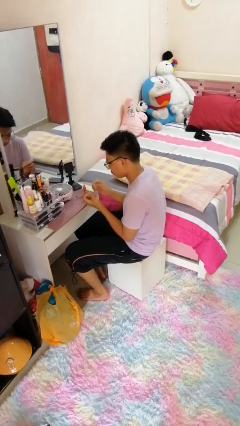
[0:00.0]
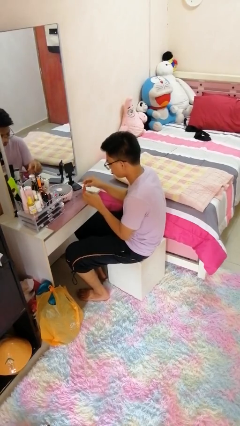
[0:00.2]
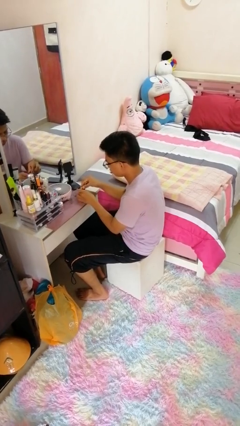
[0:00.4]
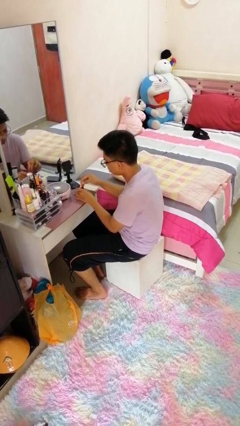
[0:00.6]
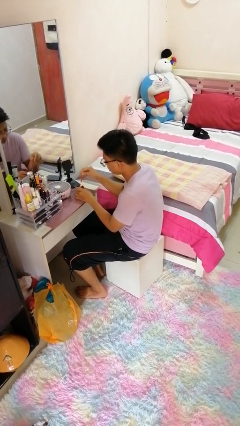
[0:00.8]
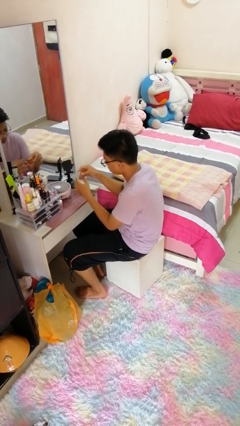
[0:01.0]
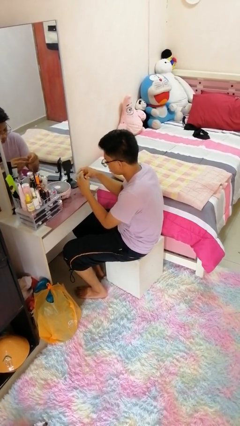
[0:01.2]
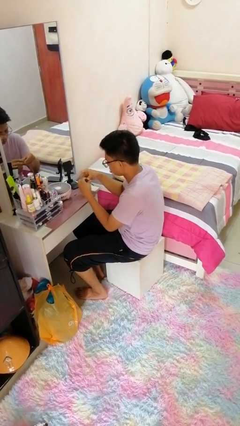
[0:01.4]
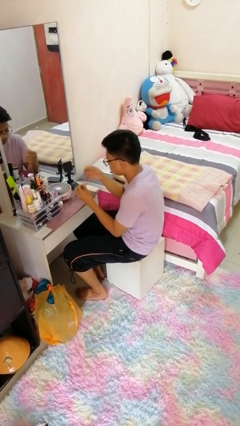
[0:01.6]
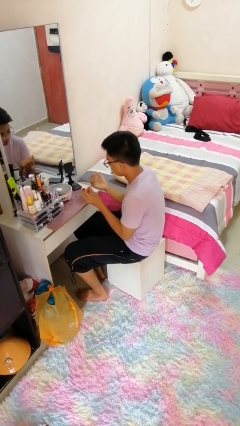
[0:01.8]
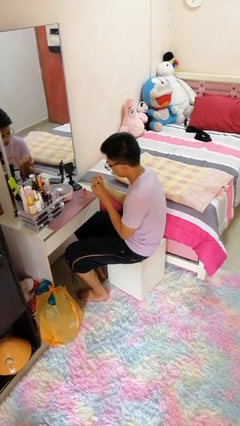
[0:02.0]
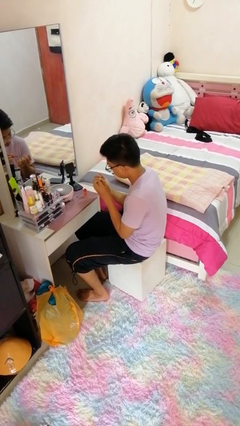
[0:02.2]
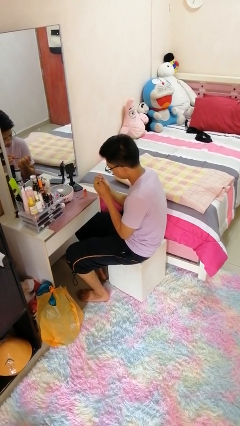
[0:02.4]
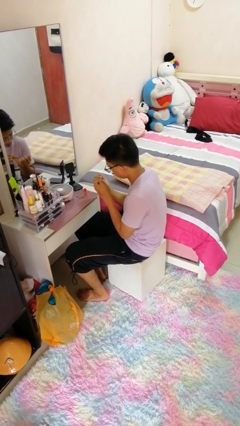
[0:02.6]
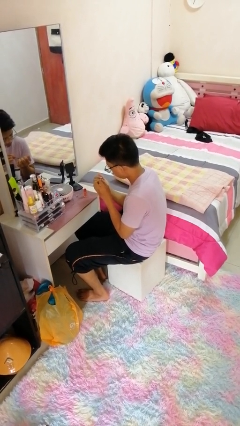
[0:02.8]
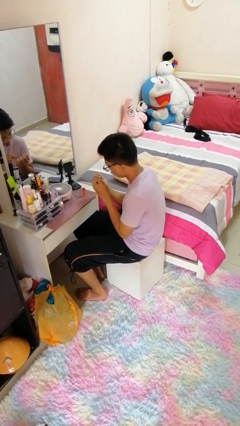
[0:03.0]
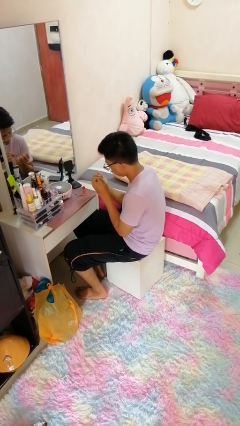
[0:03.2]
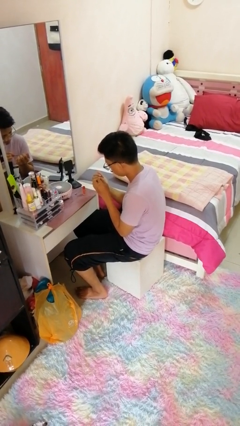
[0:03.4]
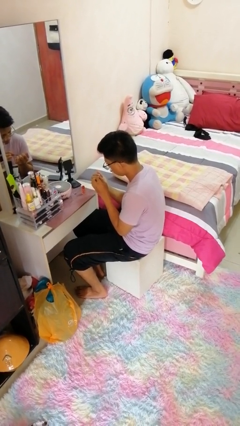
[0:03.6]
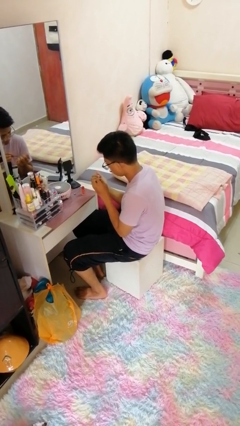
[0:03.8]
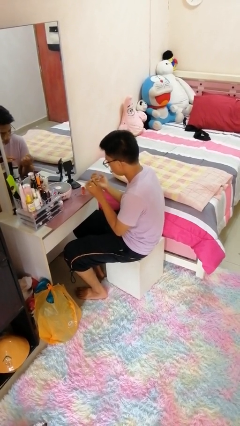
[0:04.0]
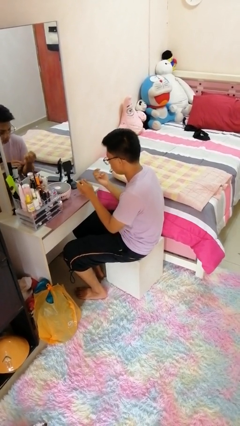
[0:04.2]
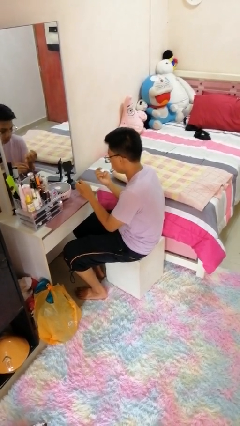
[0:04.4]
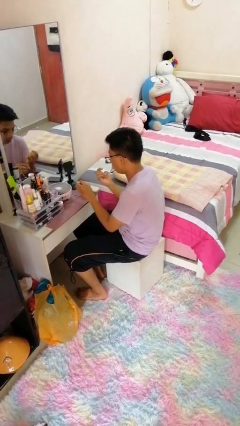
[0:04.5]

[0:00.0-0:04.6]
person paints fingernails

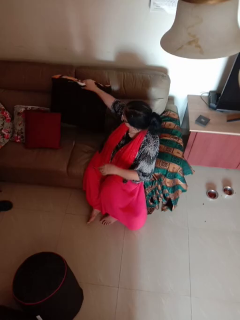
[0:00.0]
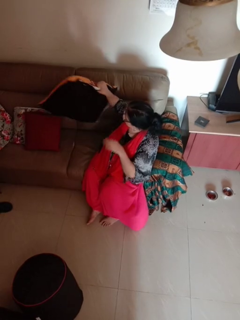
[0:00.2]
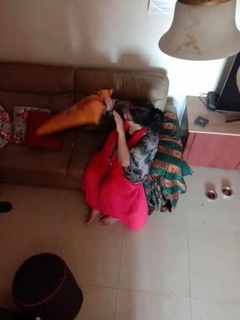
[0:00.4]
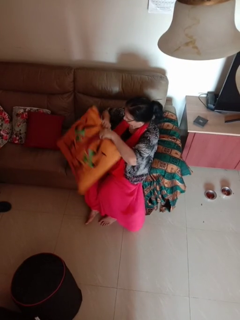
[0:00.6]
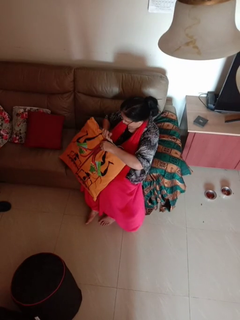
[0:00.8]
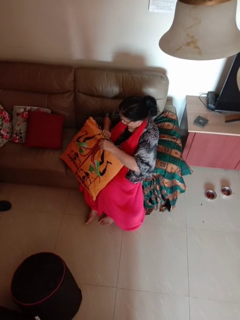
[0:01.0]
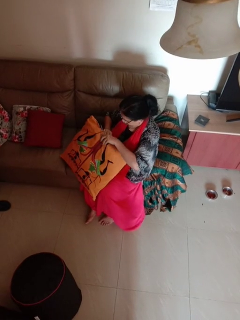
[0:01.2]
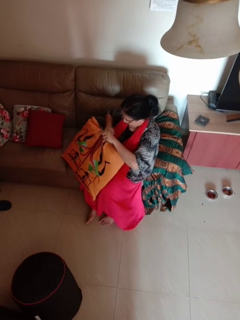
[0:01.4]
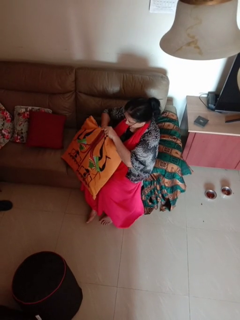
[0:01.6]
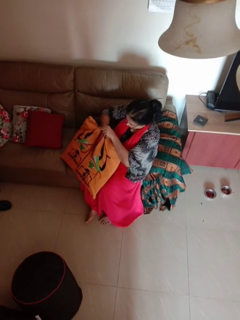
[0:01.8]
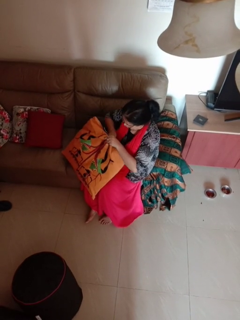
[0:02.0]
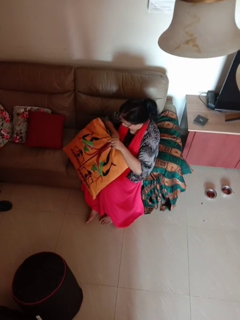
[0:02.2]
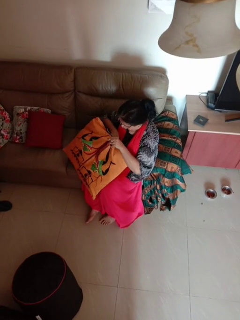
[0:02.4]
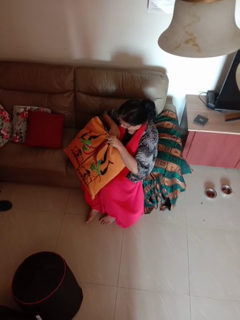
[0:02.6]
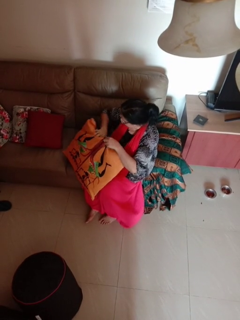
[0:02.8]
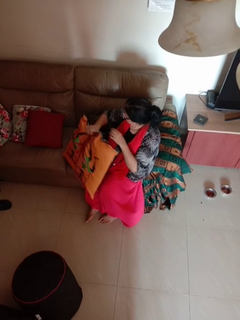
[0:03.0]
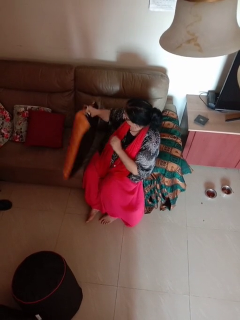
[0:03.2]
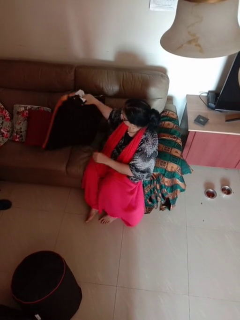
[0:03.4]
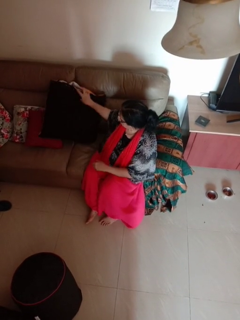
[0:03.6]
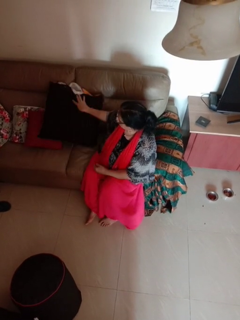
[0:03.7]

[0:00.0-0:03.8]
person searches in couch

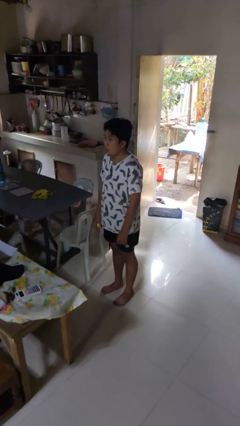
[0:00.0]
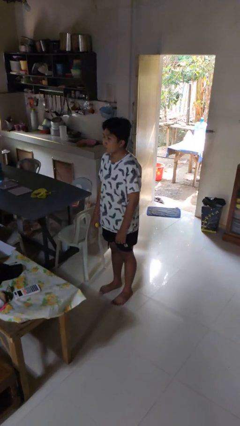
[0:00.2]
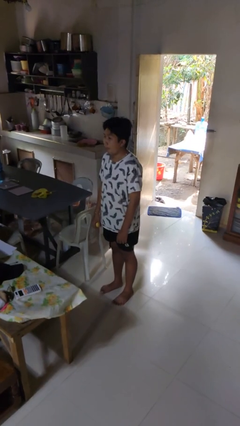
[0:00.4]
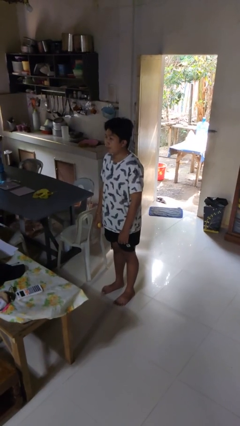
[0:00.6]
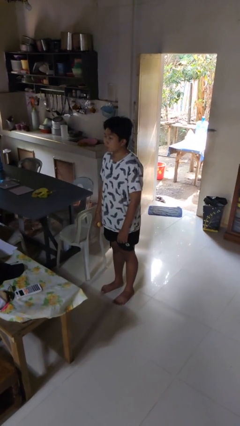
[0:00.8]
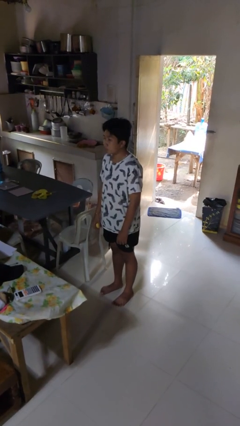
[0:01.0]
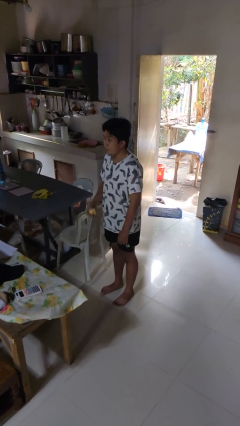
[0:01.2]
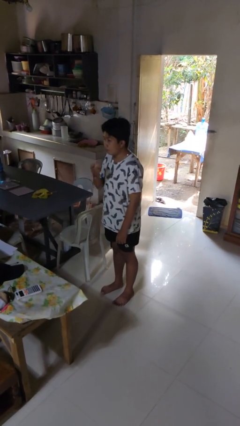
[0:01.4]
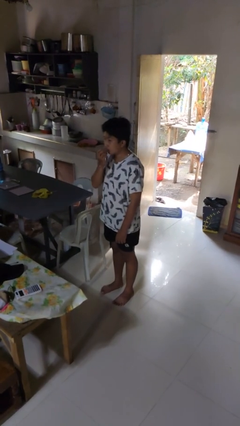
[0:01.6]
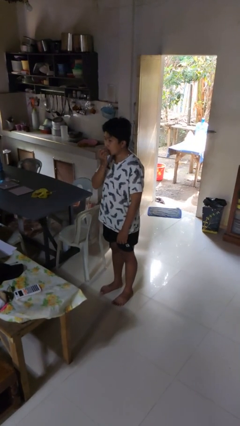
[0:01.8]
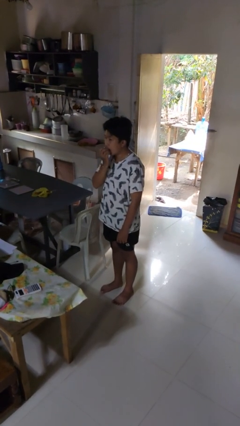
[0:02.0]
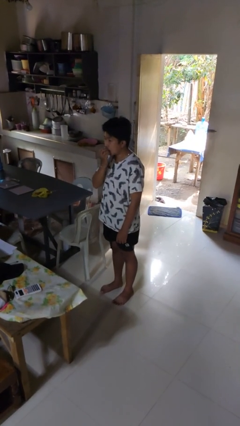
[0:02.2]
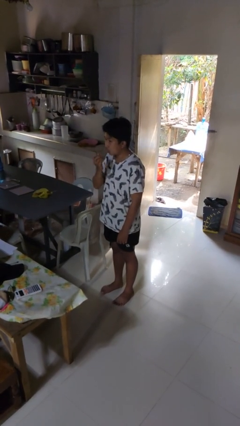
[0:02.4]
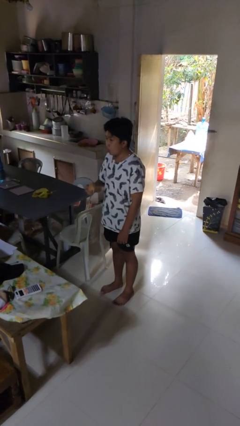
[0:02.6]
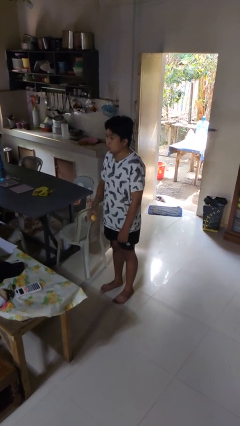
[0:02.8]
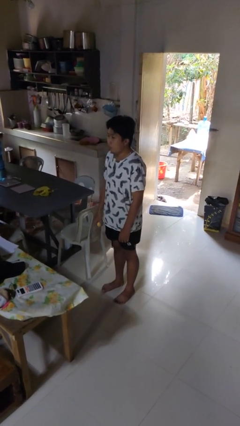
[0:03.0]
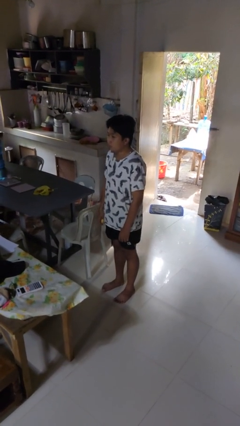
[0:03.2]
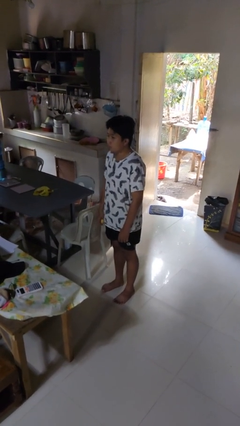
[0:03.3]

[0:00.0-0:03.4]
person eats apple

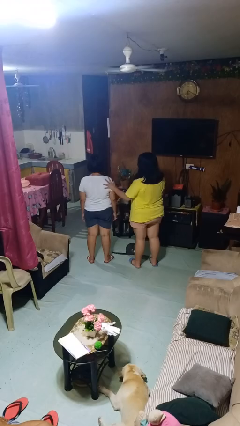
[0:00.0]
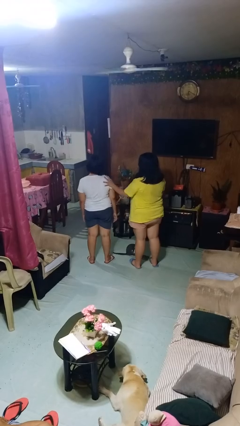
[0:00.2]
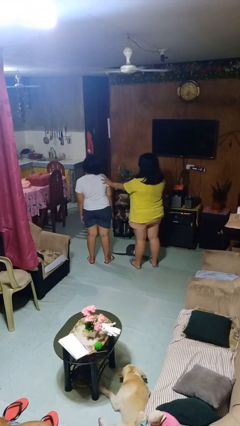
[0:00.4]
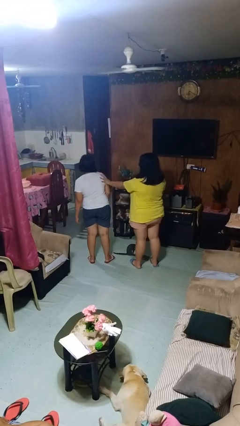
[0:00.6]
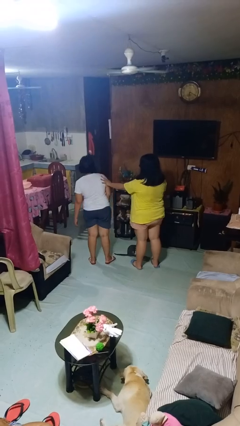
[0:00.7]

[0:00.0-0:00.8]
person shoves person

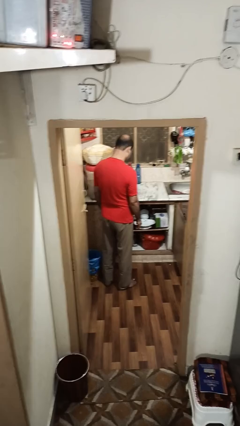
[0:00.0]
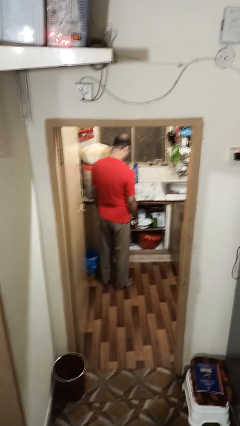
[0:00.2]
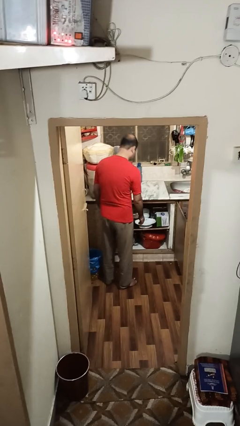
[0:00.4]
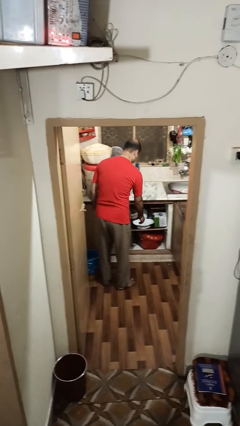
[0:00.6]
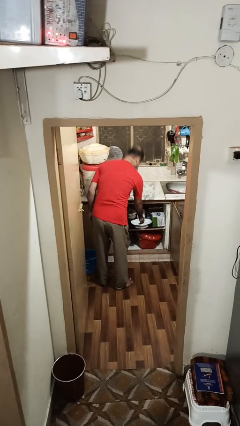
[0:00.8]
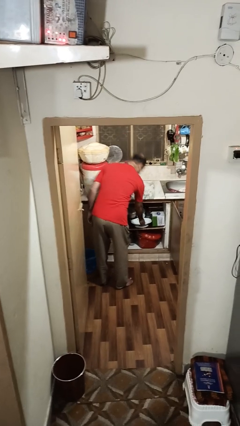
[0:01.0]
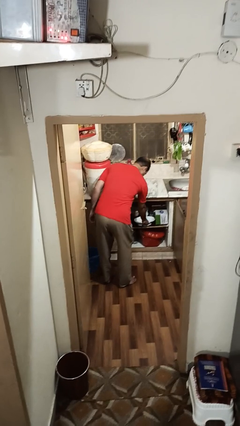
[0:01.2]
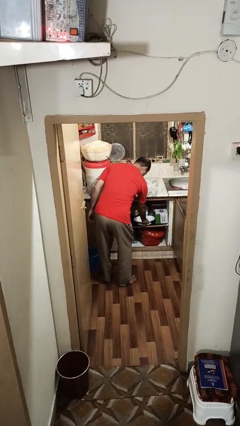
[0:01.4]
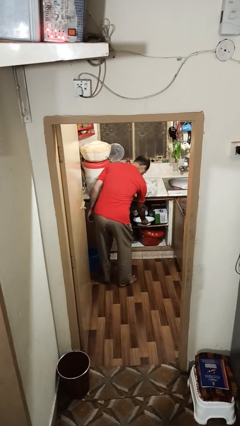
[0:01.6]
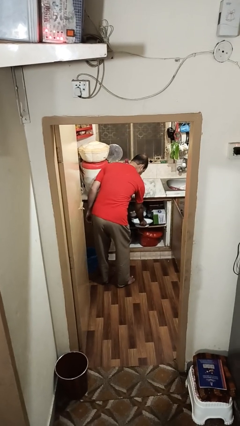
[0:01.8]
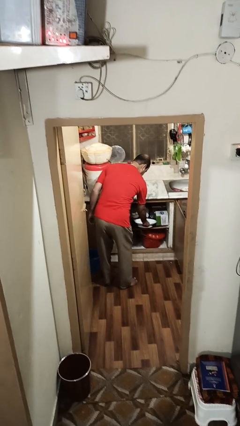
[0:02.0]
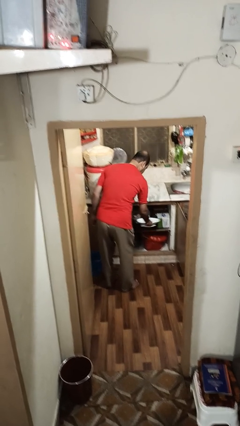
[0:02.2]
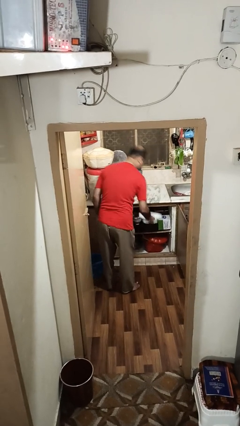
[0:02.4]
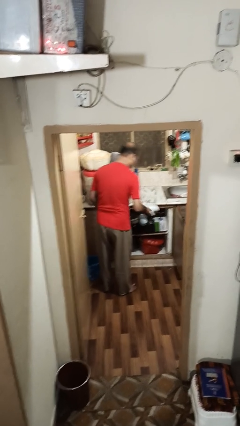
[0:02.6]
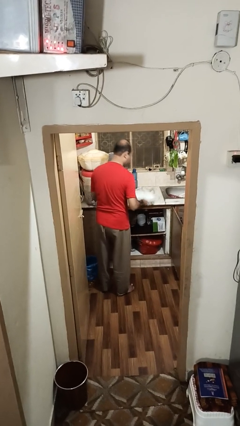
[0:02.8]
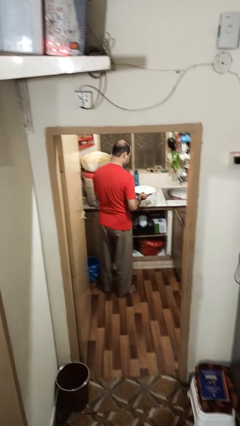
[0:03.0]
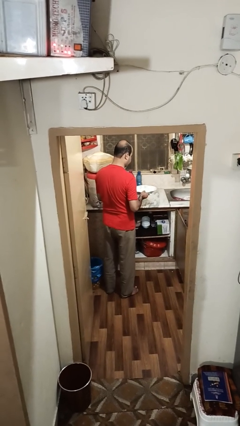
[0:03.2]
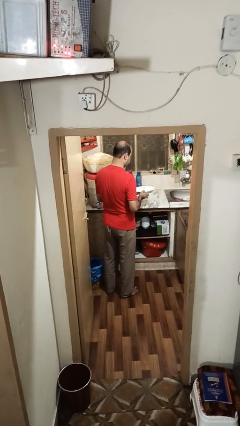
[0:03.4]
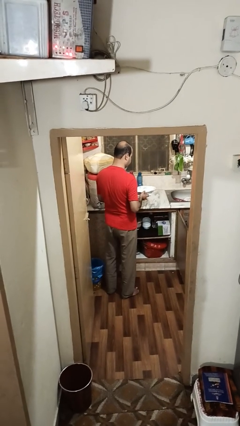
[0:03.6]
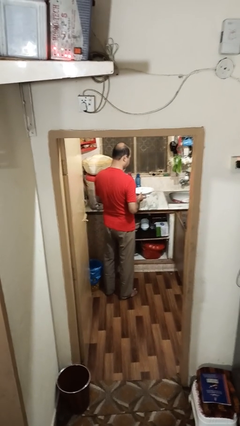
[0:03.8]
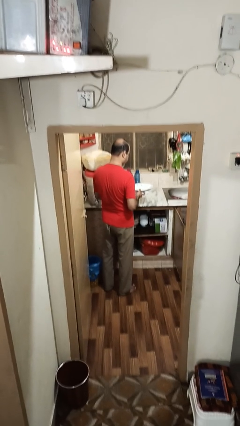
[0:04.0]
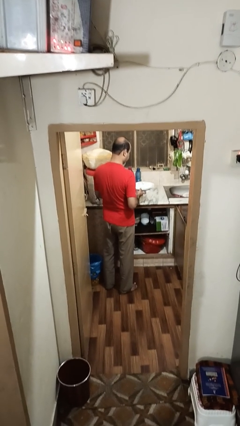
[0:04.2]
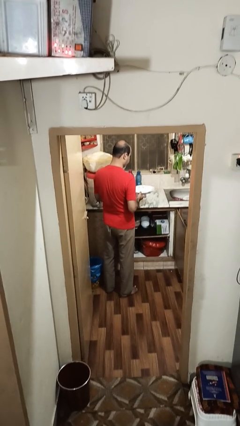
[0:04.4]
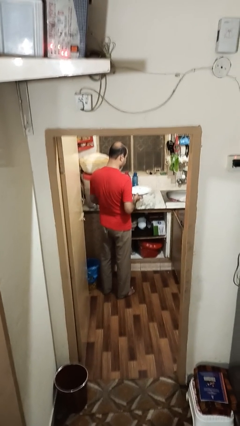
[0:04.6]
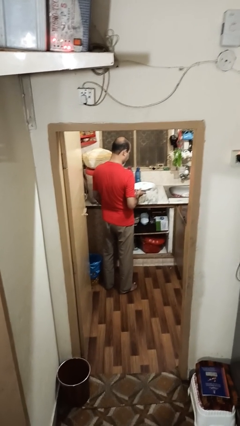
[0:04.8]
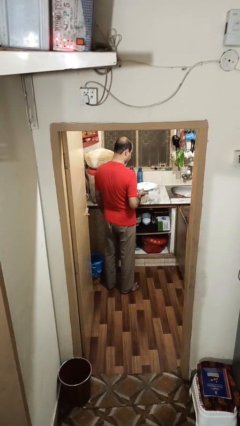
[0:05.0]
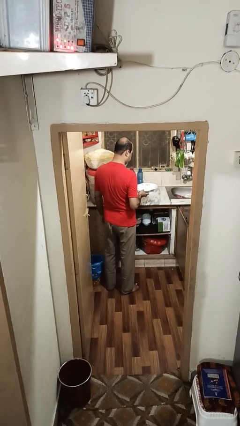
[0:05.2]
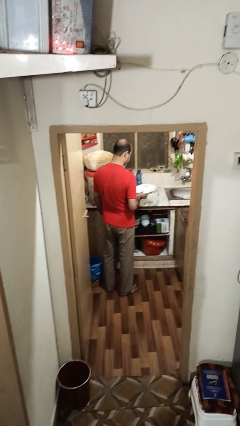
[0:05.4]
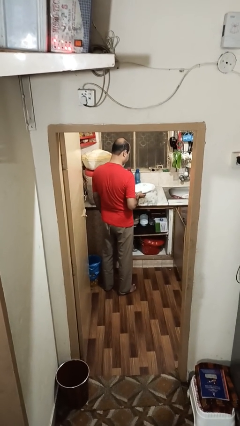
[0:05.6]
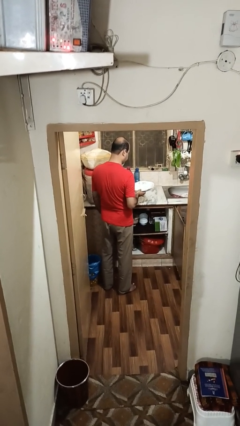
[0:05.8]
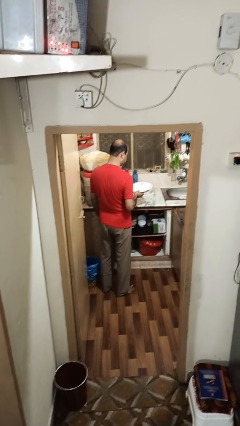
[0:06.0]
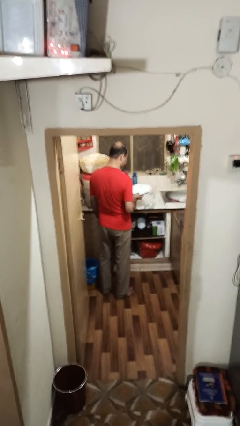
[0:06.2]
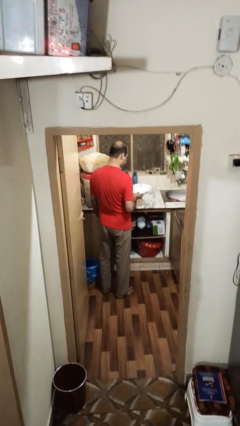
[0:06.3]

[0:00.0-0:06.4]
person picks up object from cabinet
